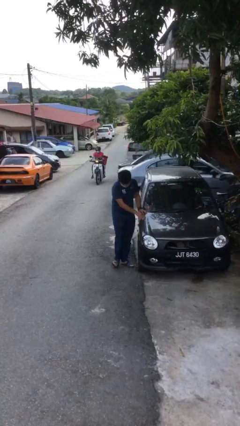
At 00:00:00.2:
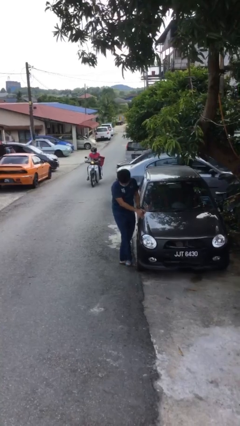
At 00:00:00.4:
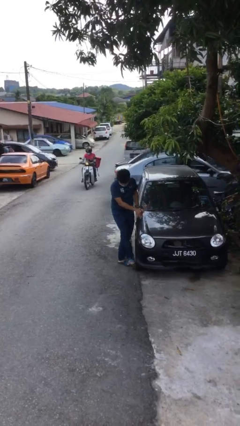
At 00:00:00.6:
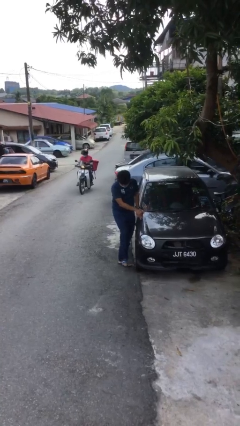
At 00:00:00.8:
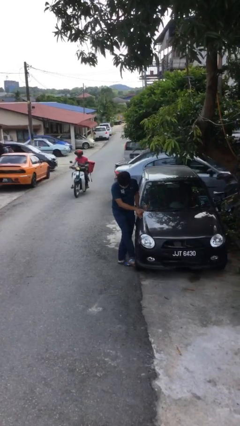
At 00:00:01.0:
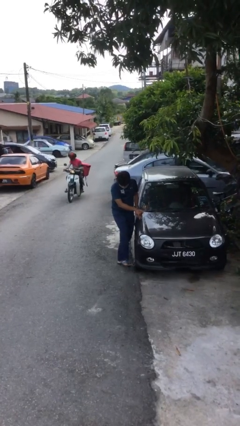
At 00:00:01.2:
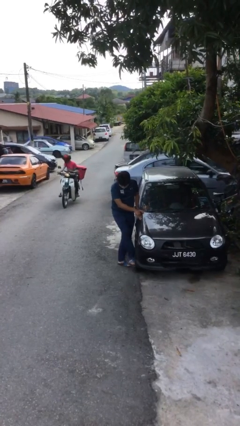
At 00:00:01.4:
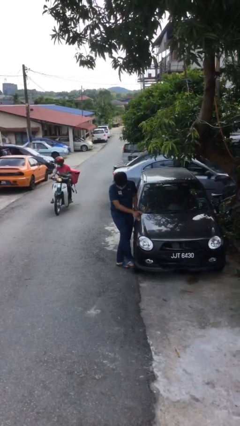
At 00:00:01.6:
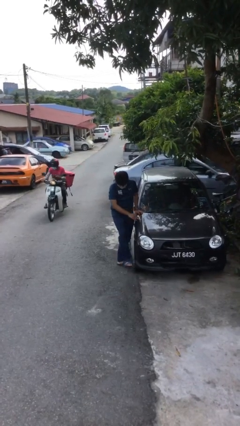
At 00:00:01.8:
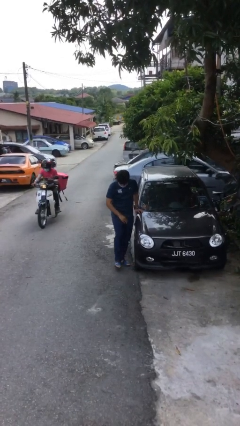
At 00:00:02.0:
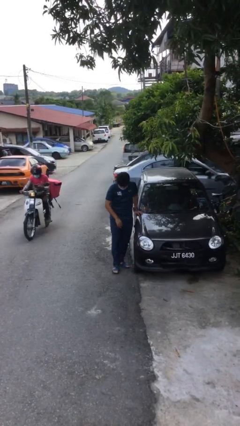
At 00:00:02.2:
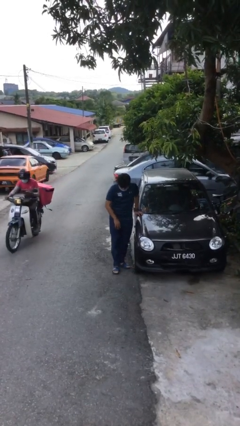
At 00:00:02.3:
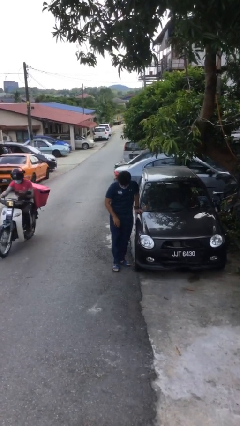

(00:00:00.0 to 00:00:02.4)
person kicks car tires

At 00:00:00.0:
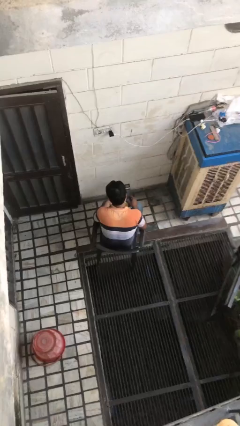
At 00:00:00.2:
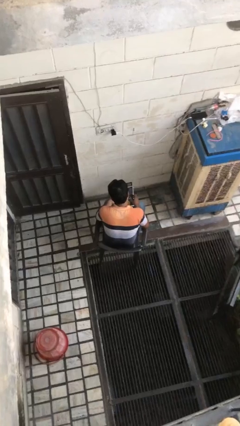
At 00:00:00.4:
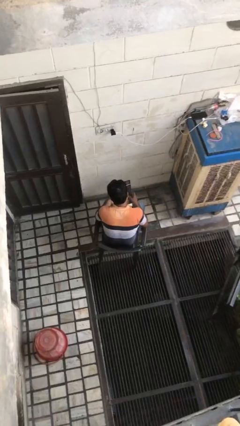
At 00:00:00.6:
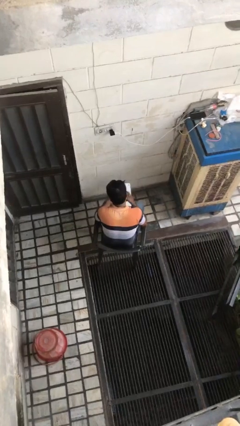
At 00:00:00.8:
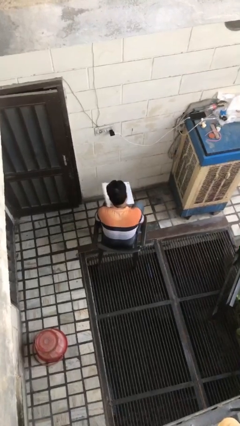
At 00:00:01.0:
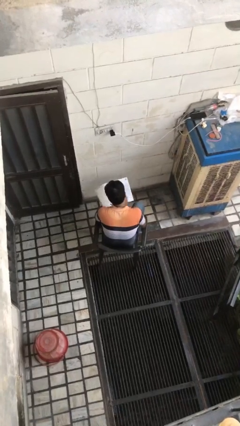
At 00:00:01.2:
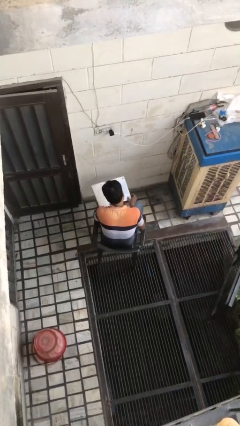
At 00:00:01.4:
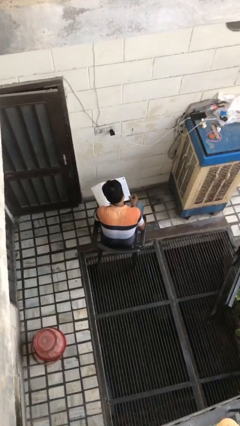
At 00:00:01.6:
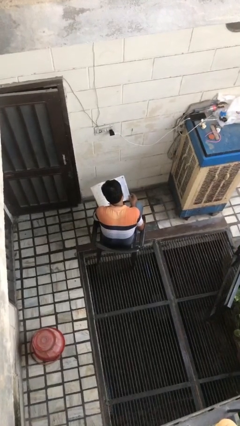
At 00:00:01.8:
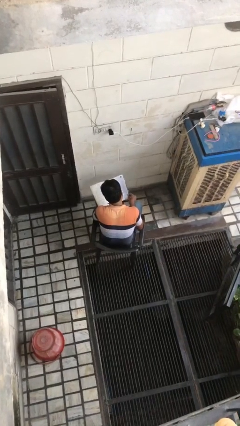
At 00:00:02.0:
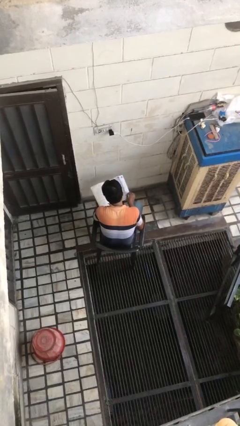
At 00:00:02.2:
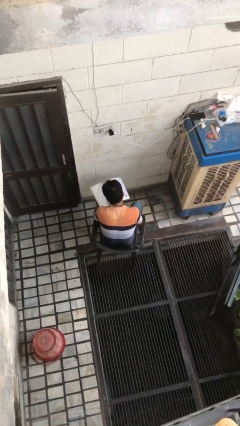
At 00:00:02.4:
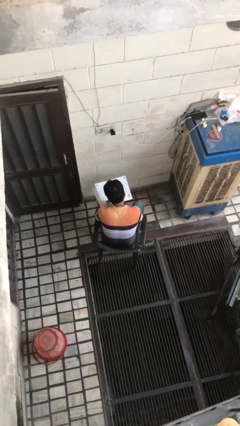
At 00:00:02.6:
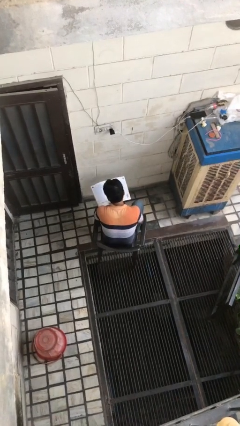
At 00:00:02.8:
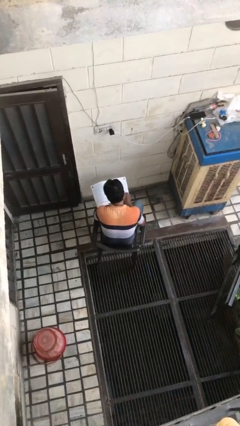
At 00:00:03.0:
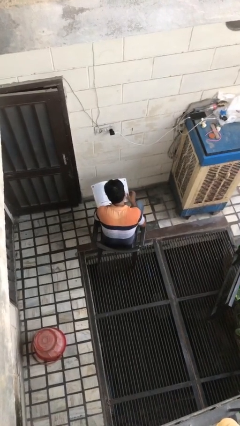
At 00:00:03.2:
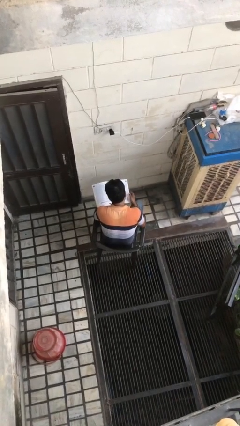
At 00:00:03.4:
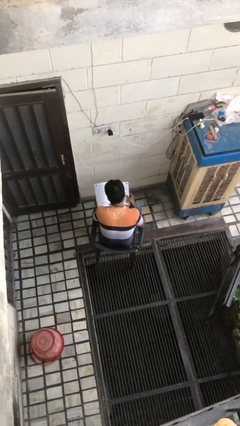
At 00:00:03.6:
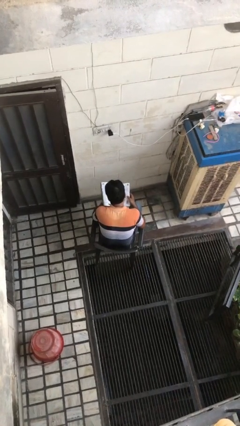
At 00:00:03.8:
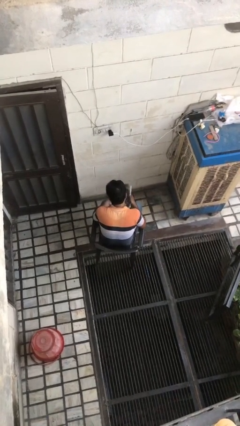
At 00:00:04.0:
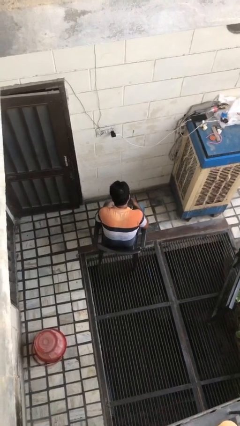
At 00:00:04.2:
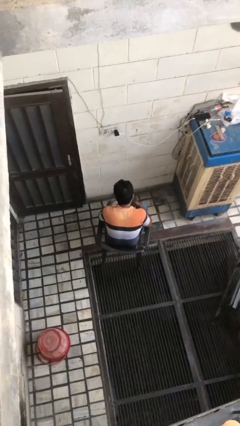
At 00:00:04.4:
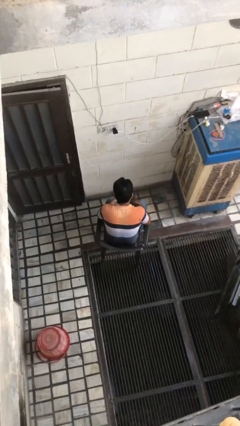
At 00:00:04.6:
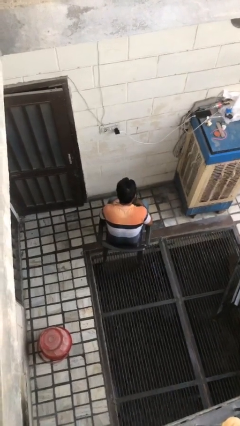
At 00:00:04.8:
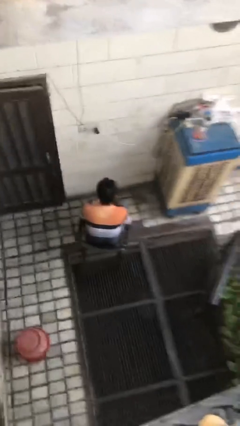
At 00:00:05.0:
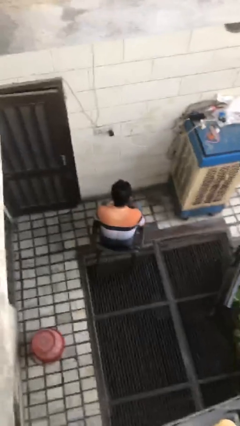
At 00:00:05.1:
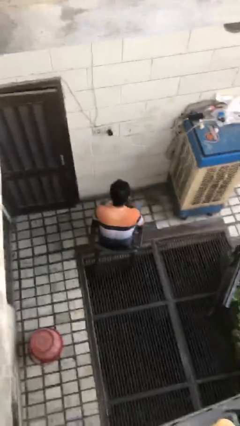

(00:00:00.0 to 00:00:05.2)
person reads magazine

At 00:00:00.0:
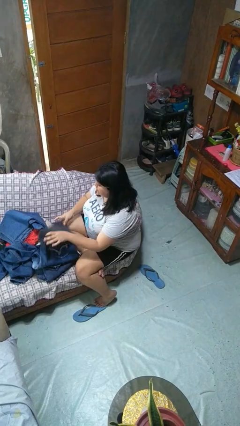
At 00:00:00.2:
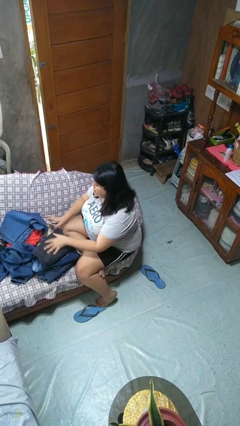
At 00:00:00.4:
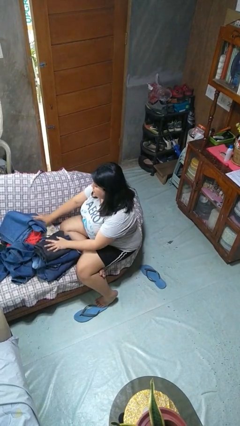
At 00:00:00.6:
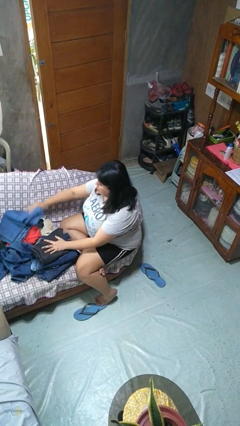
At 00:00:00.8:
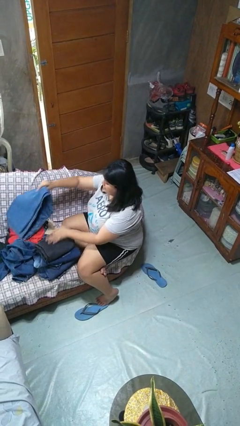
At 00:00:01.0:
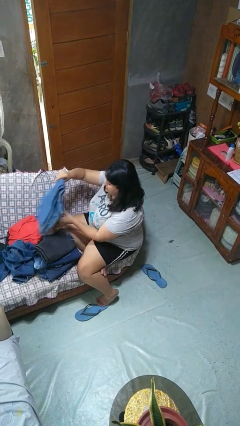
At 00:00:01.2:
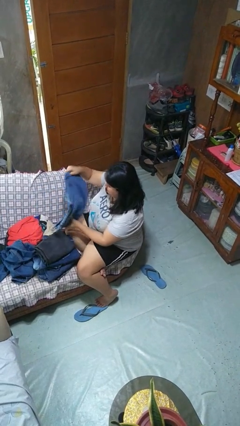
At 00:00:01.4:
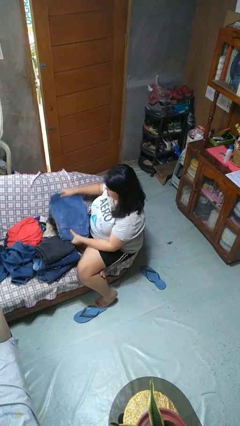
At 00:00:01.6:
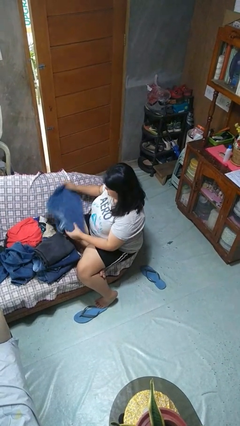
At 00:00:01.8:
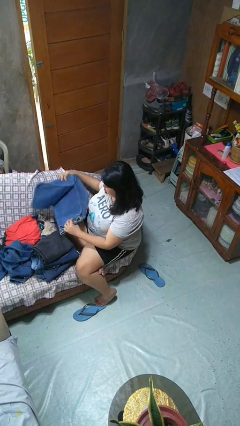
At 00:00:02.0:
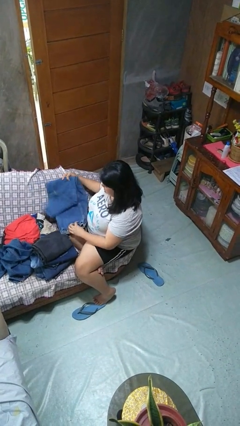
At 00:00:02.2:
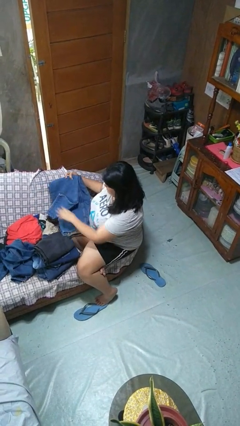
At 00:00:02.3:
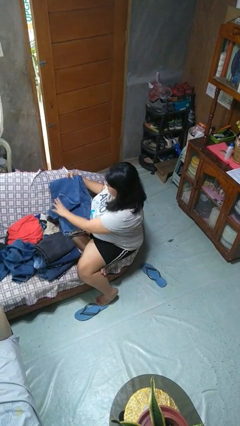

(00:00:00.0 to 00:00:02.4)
person folds pants

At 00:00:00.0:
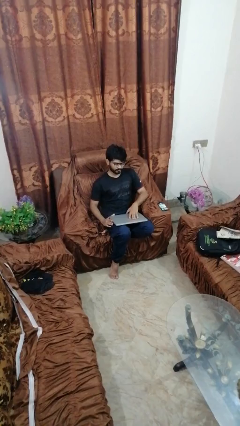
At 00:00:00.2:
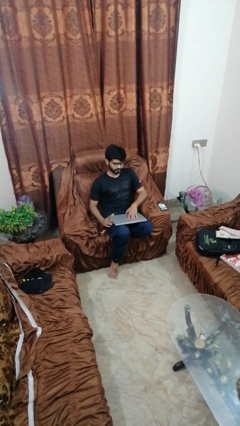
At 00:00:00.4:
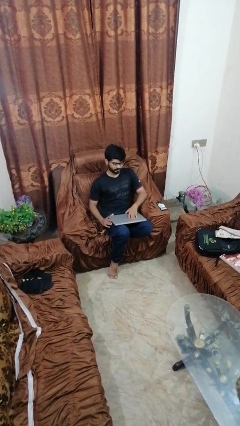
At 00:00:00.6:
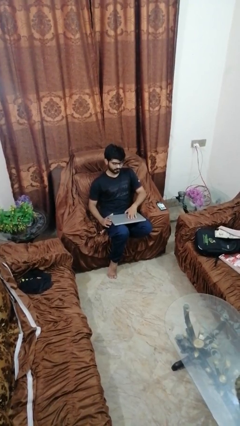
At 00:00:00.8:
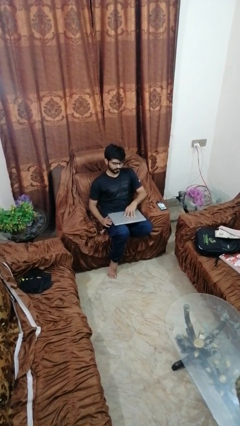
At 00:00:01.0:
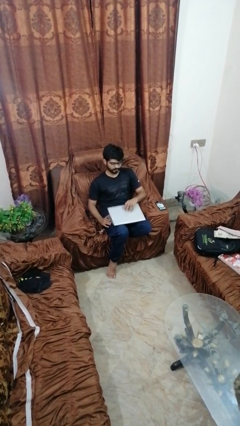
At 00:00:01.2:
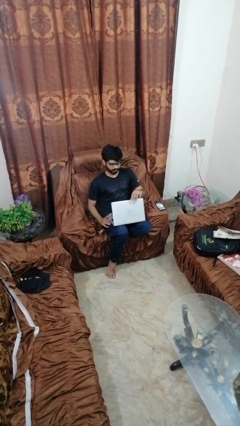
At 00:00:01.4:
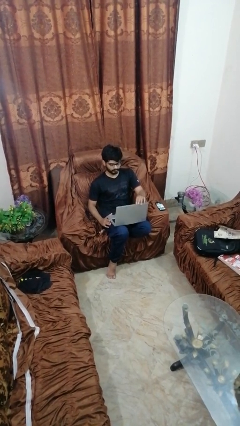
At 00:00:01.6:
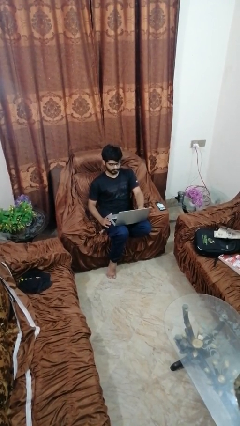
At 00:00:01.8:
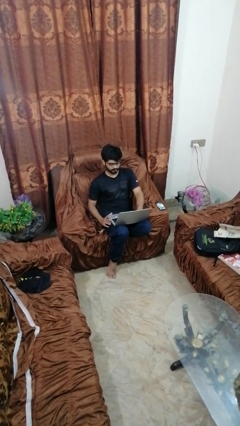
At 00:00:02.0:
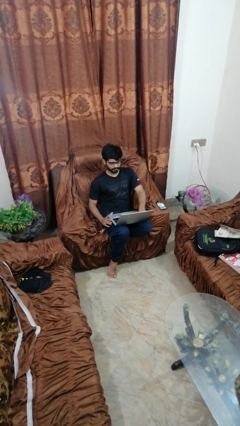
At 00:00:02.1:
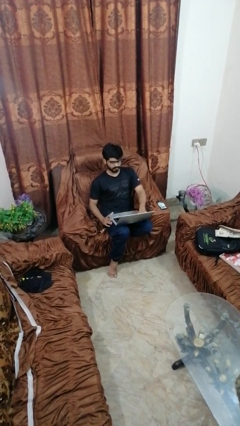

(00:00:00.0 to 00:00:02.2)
person opens laptop

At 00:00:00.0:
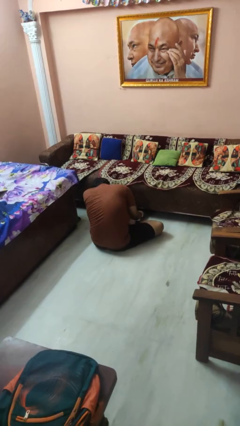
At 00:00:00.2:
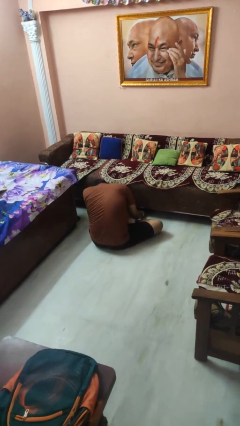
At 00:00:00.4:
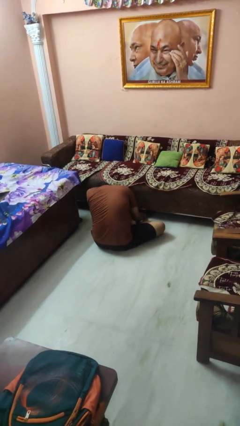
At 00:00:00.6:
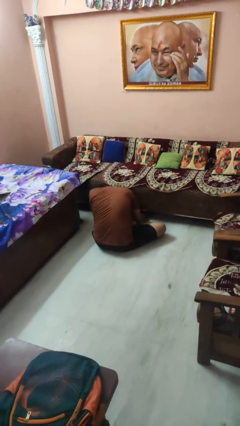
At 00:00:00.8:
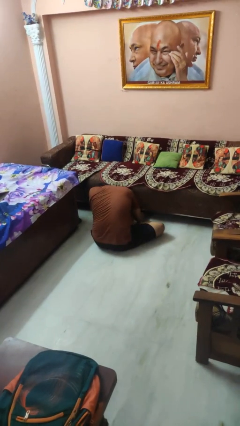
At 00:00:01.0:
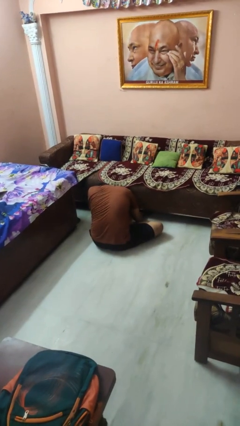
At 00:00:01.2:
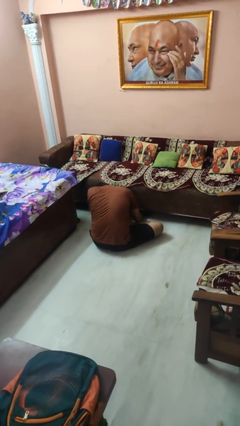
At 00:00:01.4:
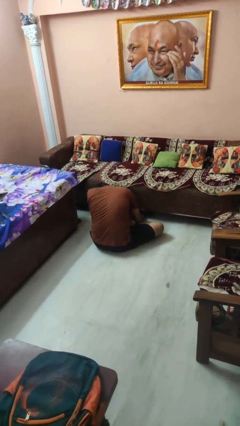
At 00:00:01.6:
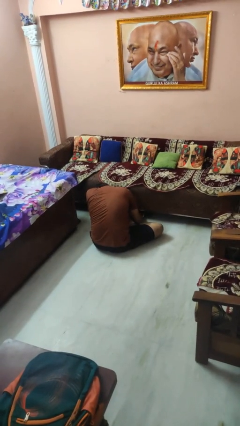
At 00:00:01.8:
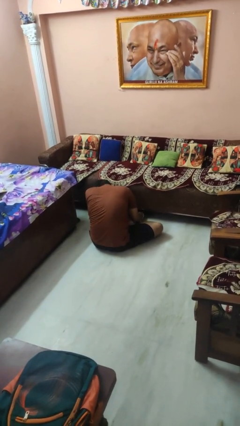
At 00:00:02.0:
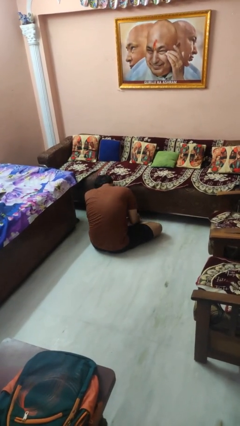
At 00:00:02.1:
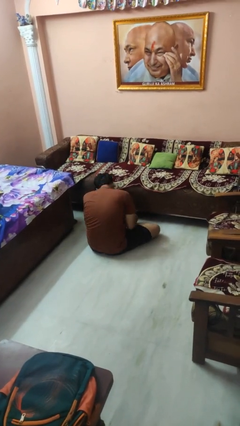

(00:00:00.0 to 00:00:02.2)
person searches under couch

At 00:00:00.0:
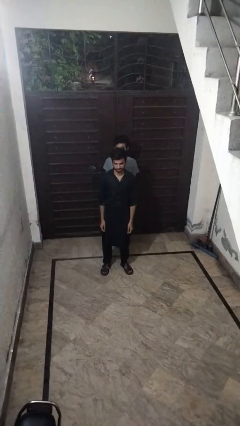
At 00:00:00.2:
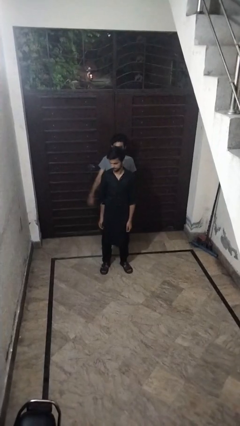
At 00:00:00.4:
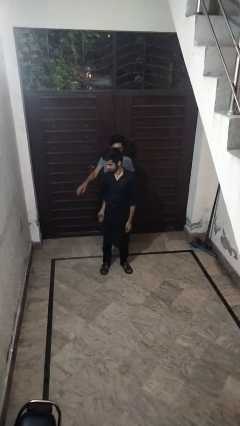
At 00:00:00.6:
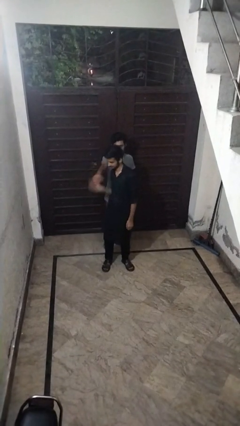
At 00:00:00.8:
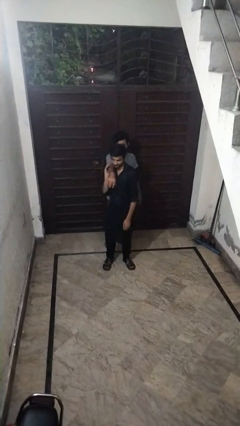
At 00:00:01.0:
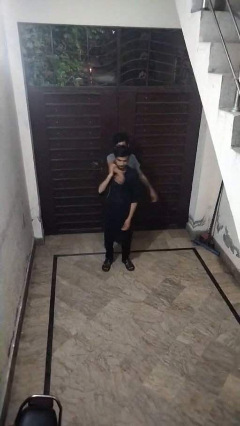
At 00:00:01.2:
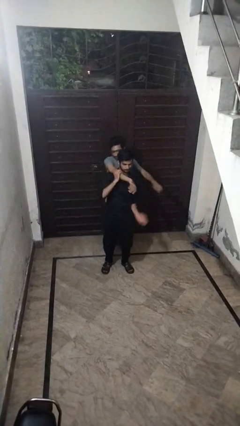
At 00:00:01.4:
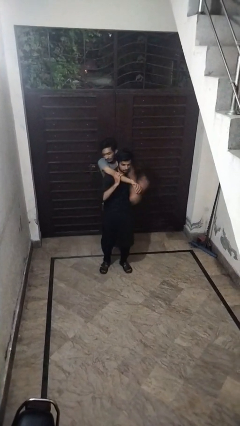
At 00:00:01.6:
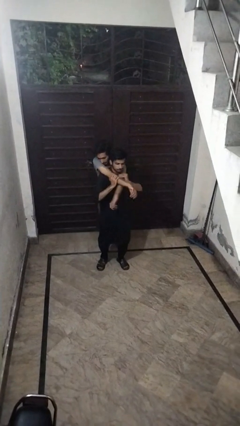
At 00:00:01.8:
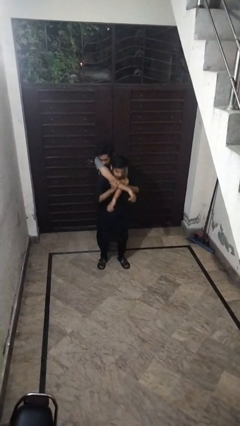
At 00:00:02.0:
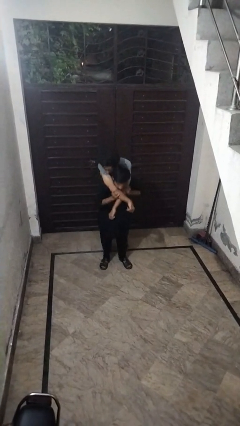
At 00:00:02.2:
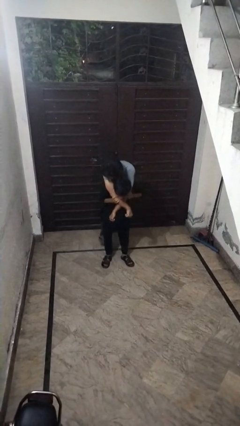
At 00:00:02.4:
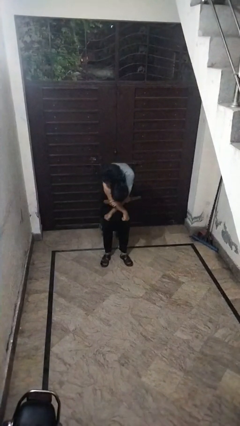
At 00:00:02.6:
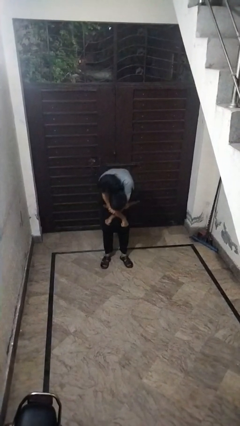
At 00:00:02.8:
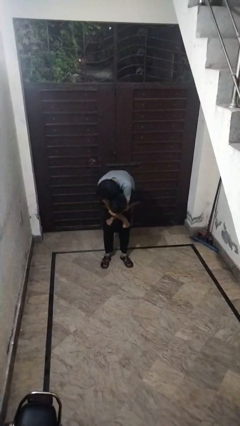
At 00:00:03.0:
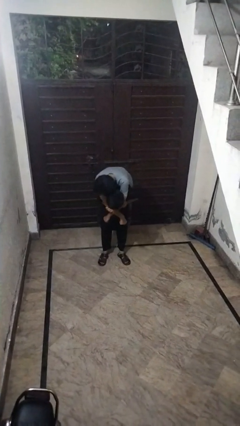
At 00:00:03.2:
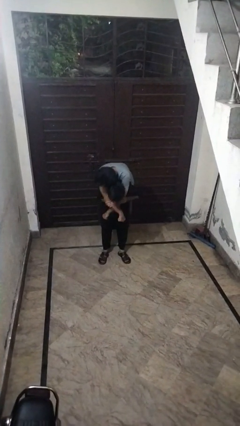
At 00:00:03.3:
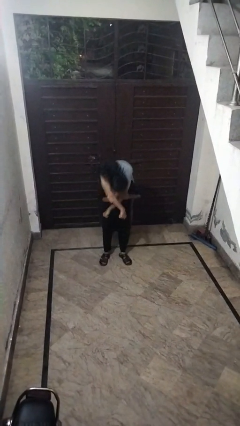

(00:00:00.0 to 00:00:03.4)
person carries person over shoulder
